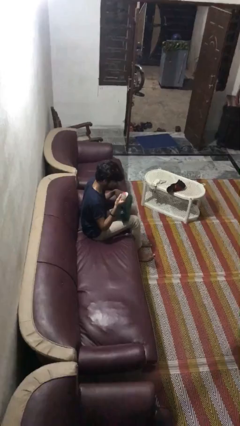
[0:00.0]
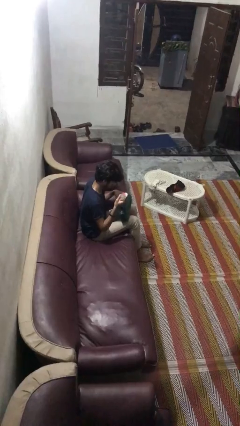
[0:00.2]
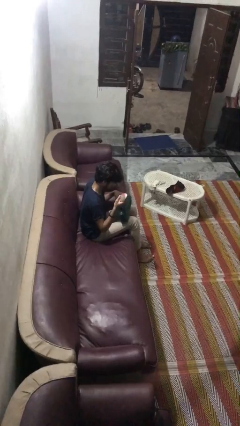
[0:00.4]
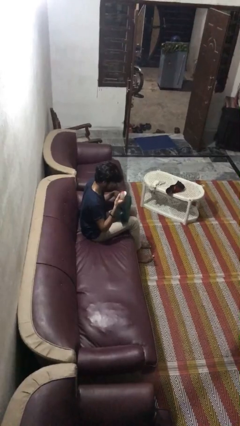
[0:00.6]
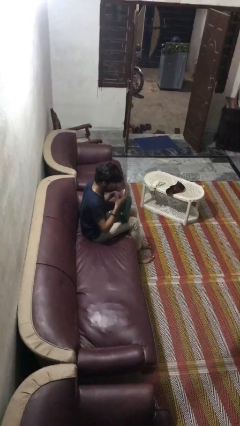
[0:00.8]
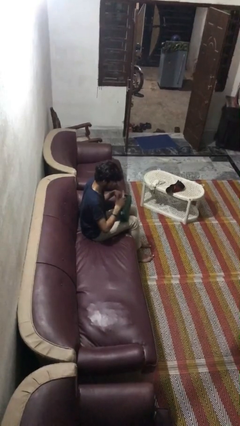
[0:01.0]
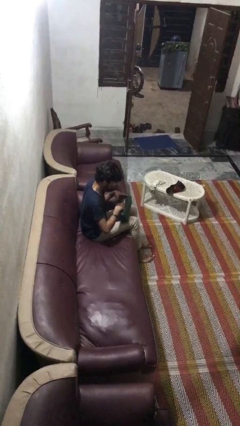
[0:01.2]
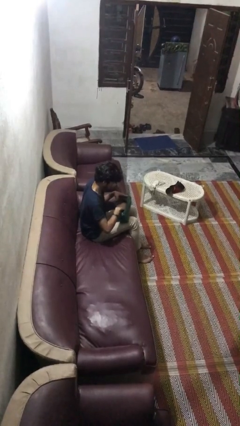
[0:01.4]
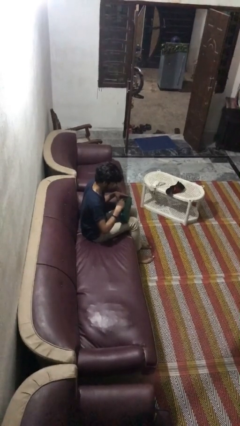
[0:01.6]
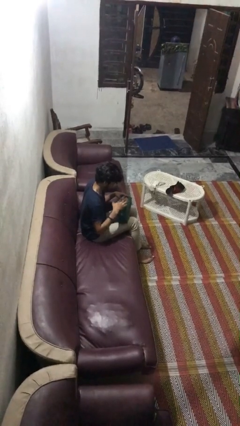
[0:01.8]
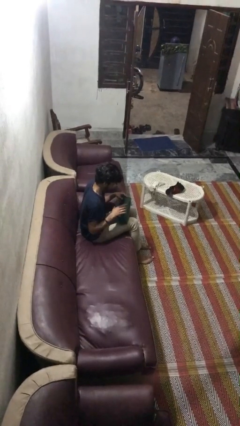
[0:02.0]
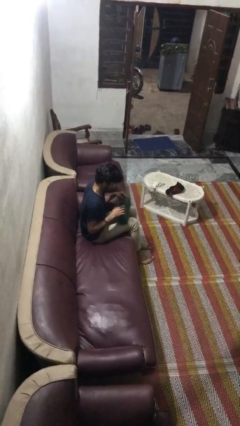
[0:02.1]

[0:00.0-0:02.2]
person puts object into purse

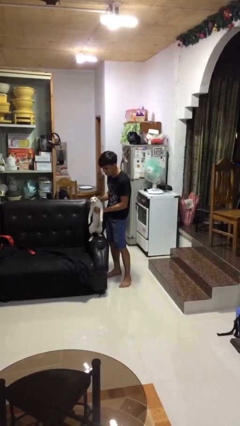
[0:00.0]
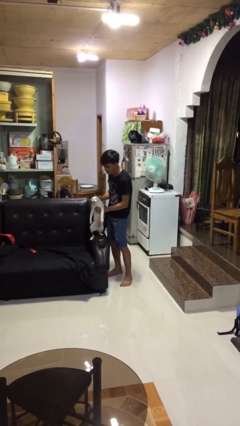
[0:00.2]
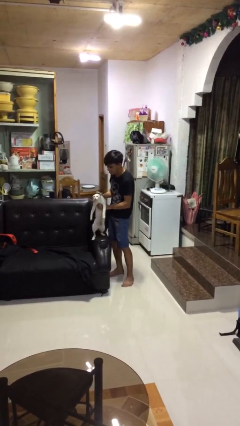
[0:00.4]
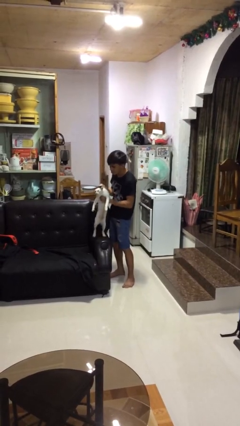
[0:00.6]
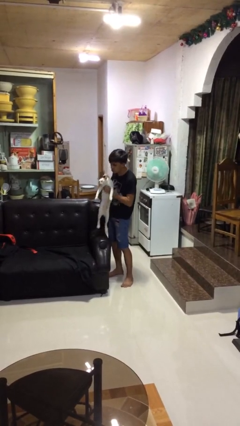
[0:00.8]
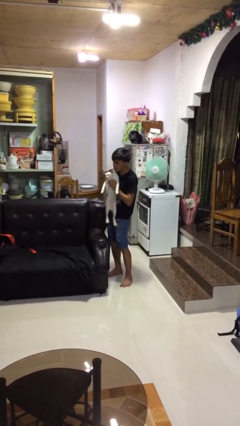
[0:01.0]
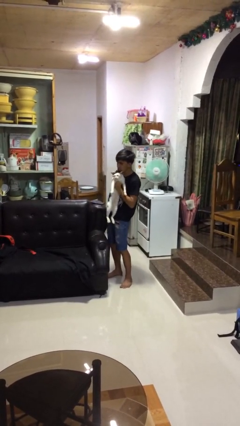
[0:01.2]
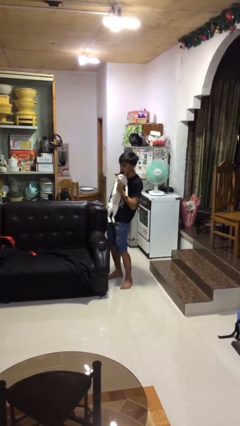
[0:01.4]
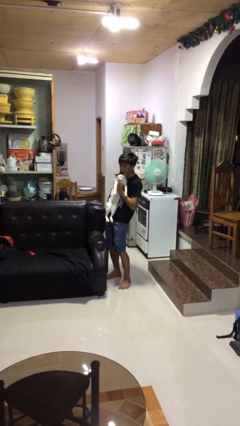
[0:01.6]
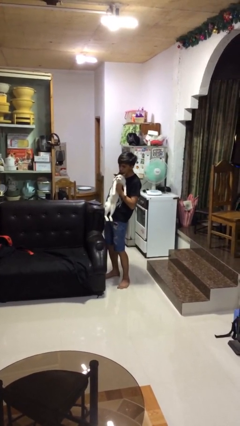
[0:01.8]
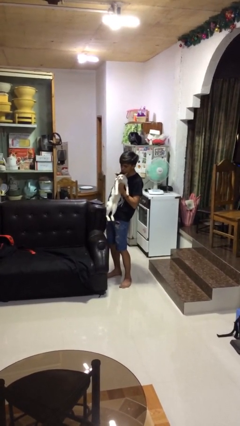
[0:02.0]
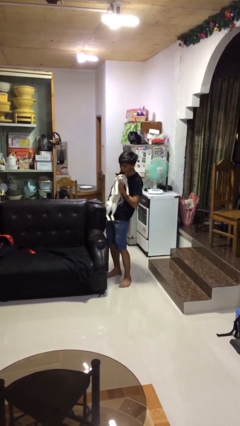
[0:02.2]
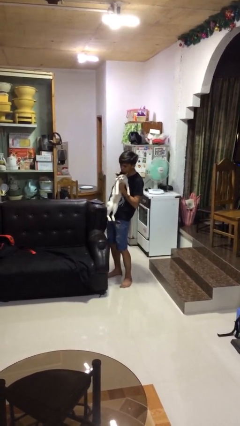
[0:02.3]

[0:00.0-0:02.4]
person hugs cat

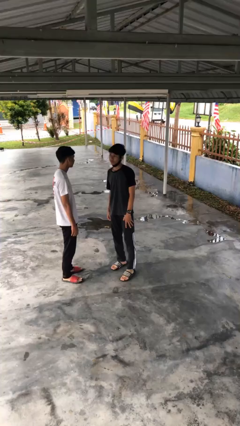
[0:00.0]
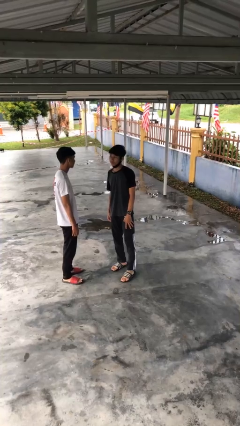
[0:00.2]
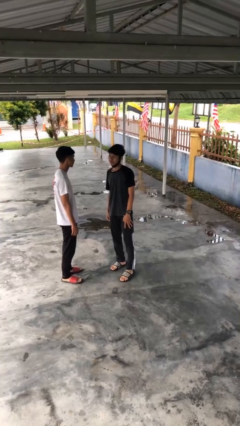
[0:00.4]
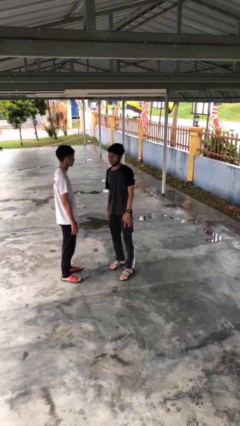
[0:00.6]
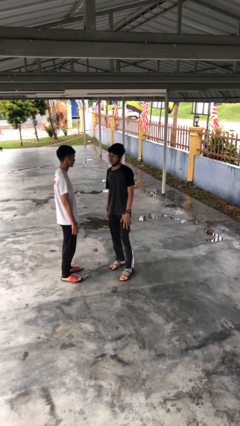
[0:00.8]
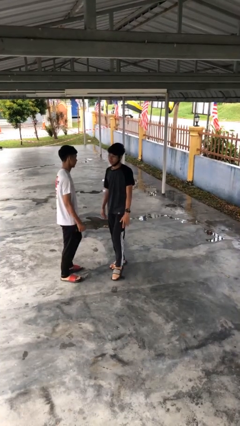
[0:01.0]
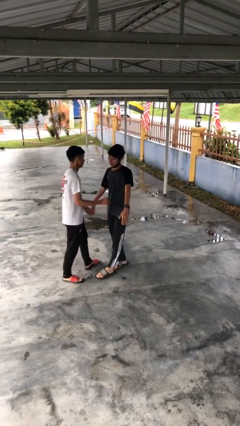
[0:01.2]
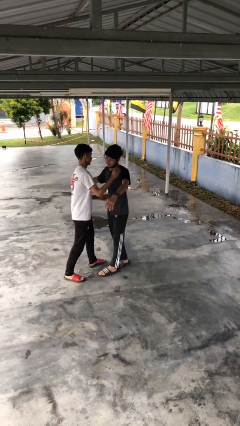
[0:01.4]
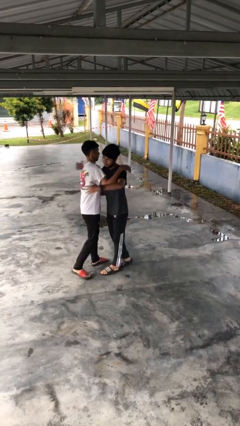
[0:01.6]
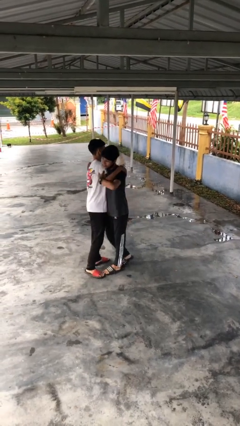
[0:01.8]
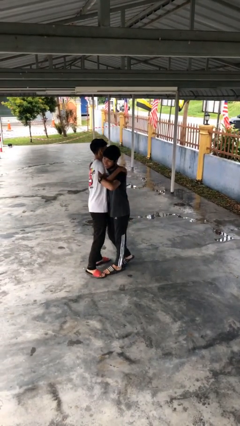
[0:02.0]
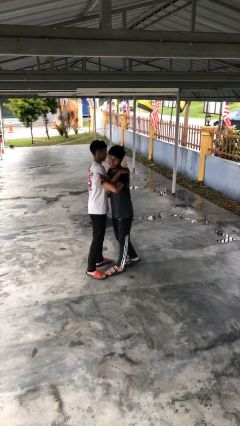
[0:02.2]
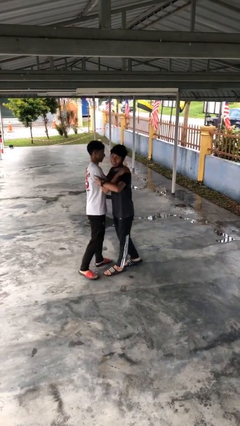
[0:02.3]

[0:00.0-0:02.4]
person embraces person

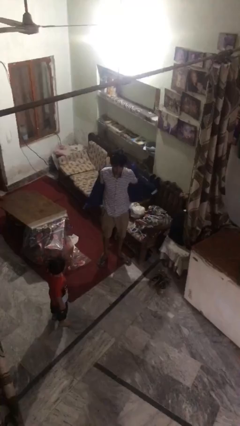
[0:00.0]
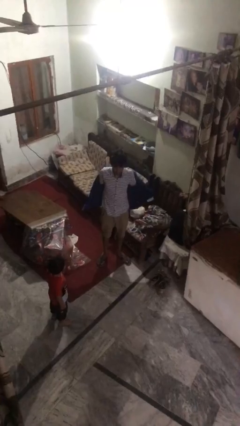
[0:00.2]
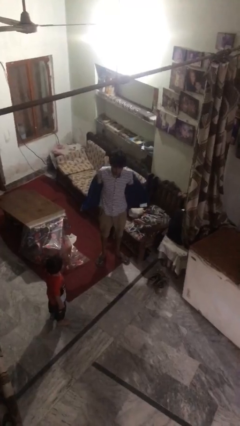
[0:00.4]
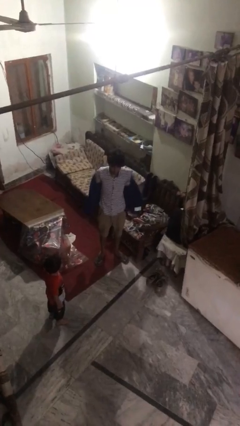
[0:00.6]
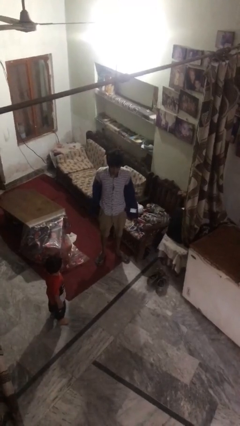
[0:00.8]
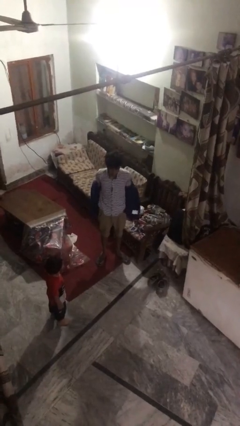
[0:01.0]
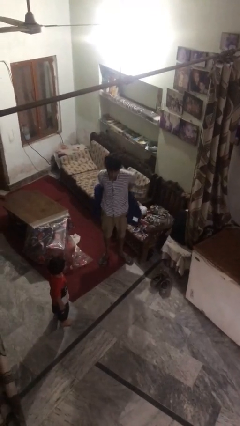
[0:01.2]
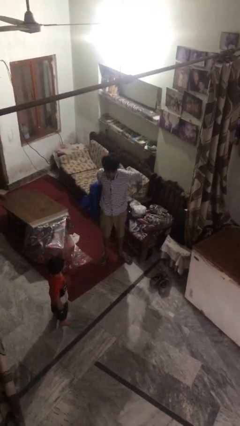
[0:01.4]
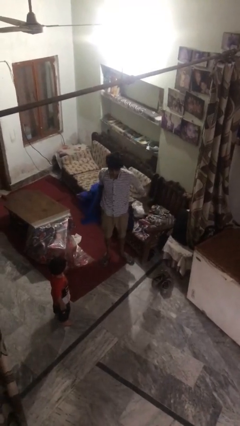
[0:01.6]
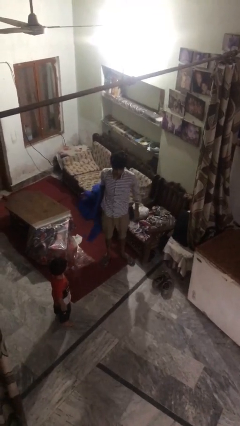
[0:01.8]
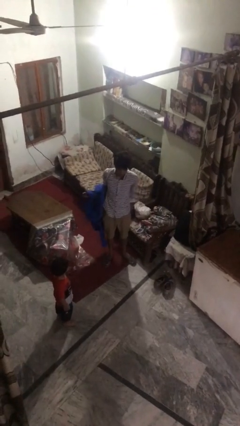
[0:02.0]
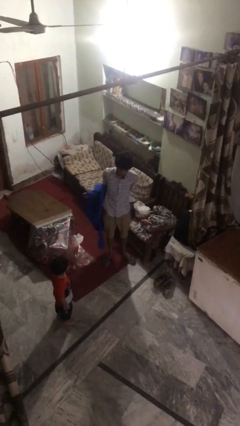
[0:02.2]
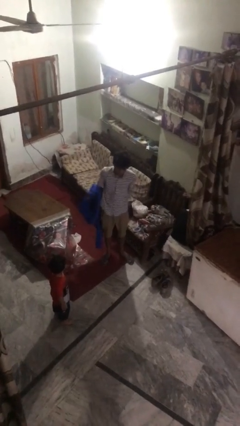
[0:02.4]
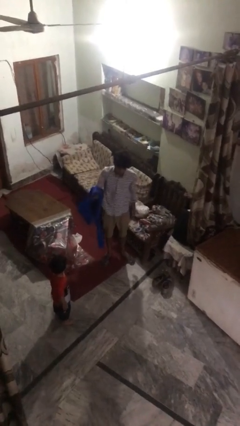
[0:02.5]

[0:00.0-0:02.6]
person takes off jacket

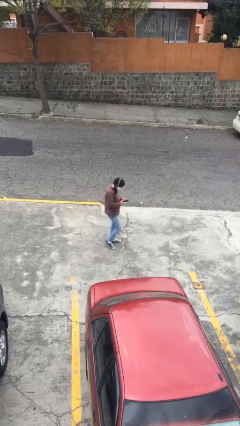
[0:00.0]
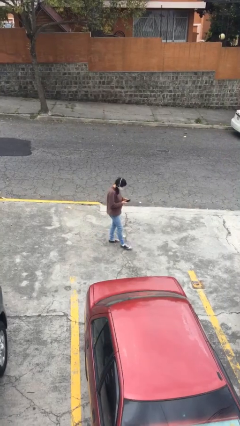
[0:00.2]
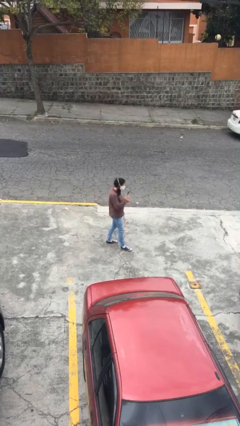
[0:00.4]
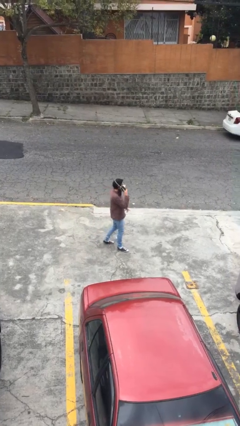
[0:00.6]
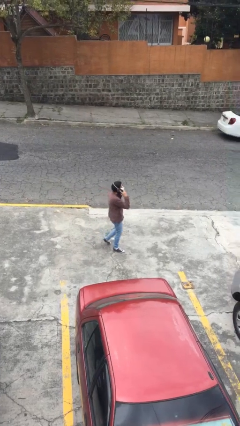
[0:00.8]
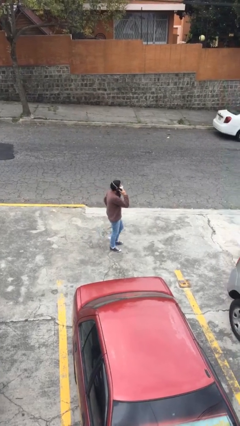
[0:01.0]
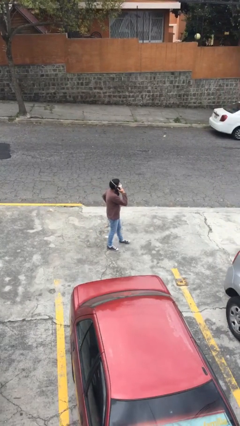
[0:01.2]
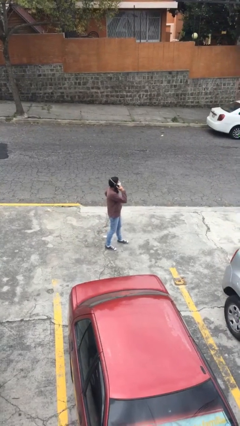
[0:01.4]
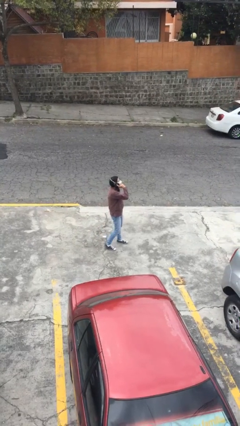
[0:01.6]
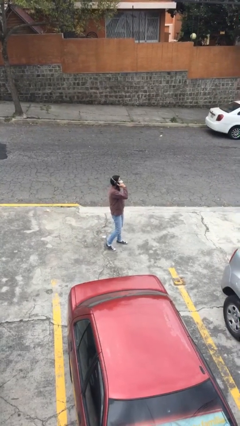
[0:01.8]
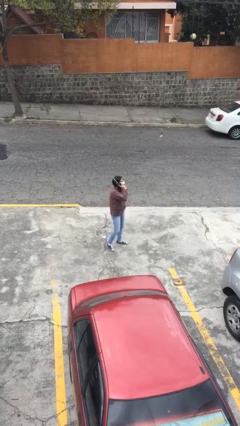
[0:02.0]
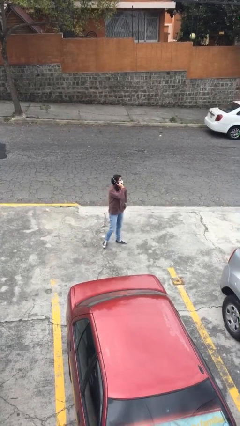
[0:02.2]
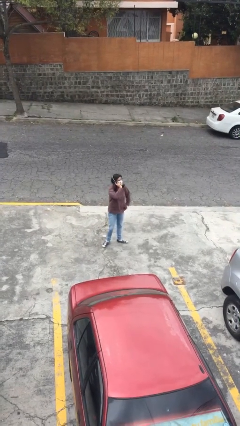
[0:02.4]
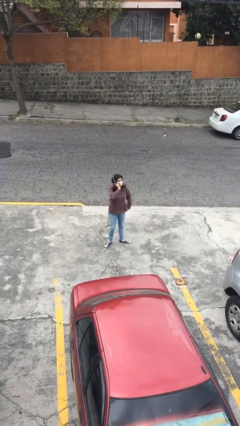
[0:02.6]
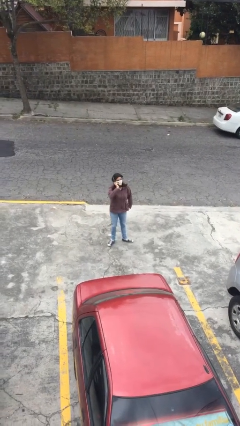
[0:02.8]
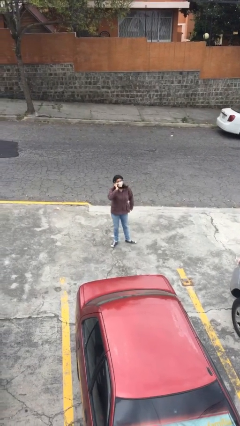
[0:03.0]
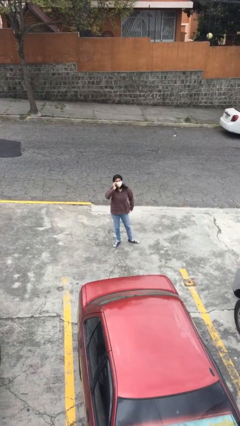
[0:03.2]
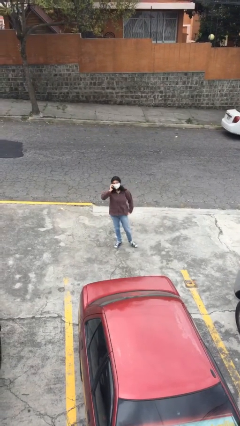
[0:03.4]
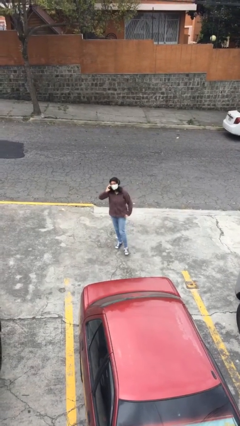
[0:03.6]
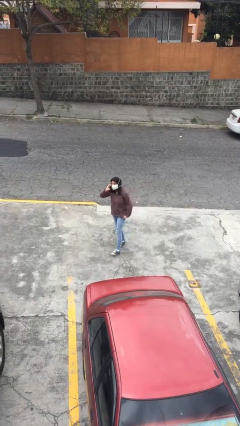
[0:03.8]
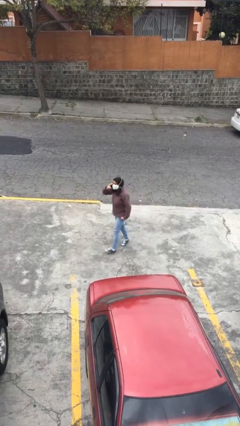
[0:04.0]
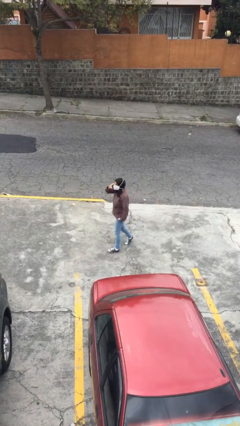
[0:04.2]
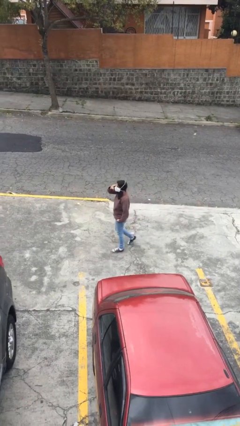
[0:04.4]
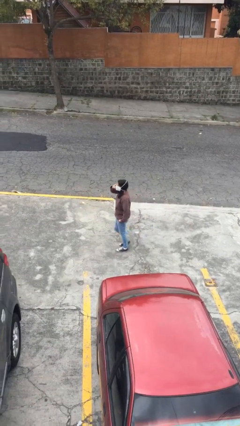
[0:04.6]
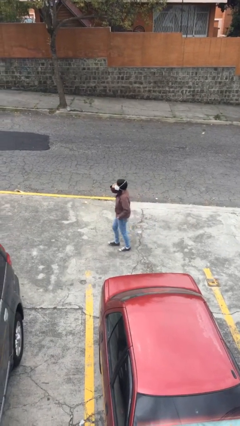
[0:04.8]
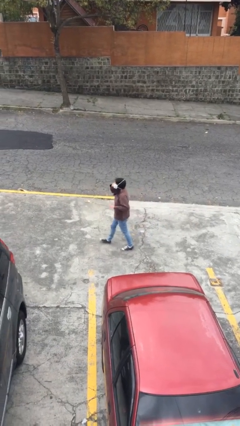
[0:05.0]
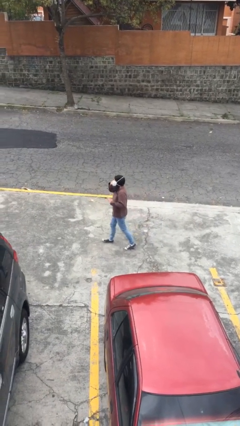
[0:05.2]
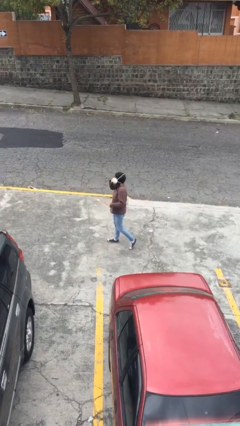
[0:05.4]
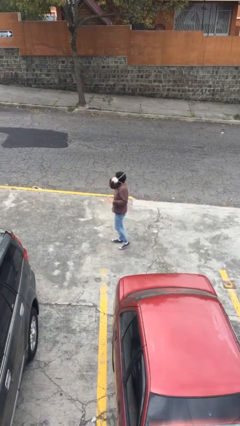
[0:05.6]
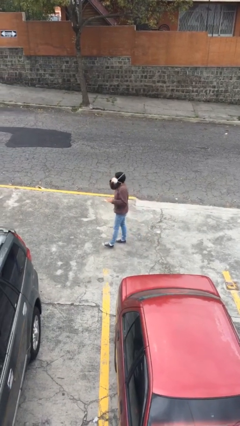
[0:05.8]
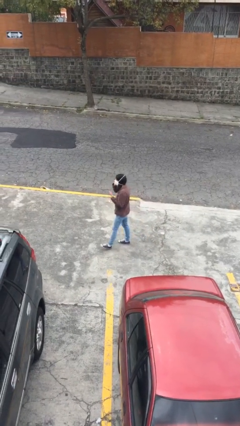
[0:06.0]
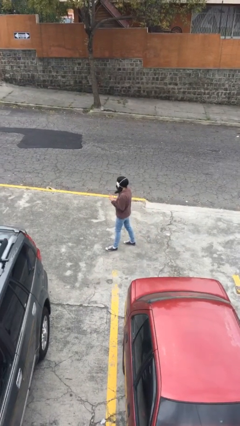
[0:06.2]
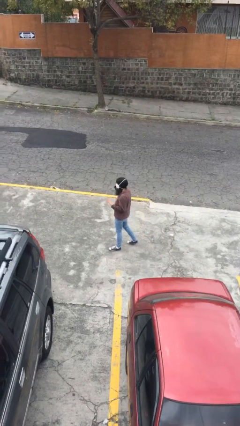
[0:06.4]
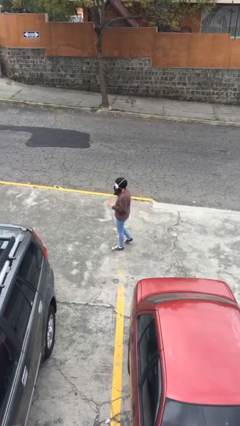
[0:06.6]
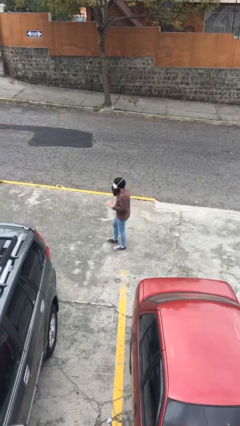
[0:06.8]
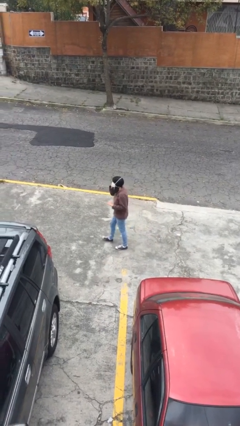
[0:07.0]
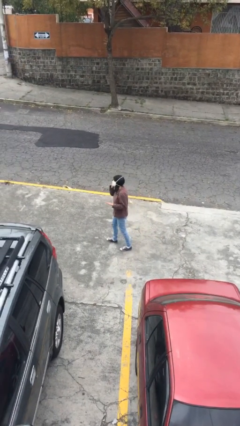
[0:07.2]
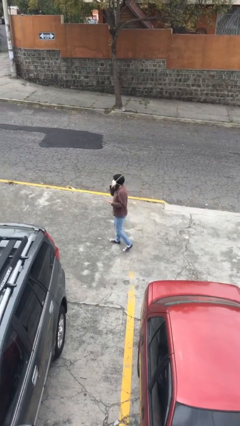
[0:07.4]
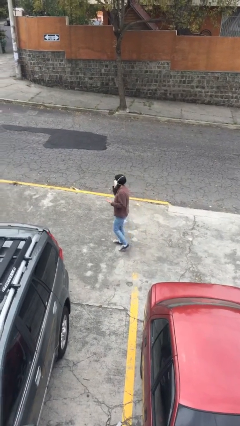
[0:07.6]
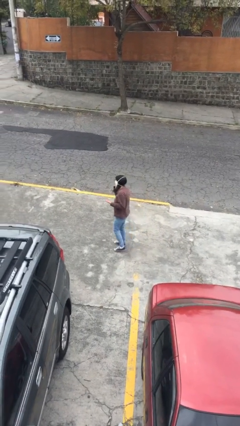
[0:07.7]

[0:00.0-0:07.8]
person talks on phone
